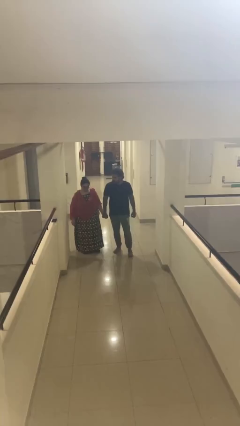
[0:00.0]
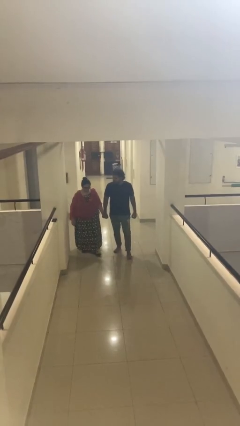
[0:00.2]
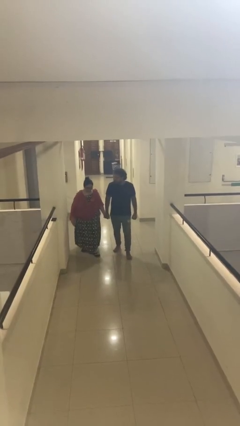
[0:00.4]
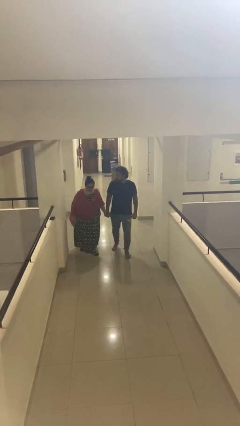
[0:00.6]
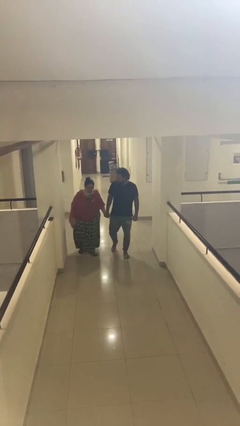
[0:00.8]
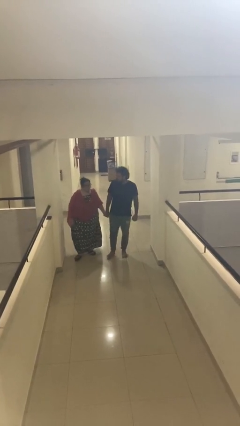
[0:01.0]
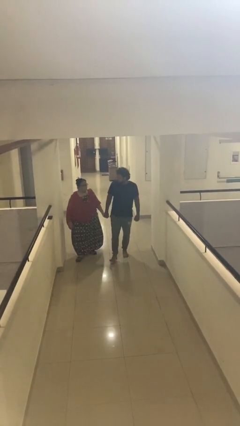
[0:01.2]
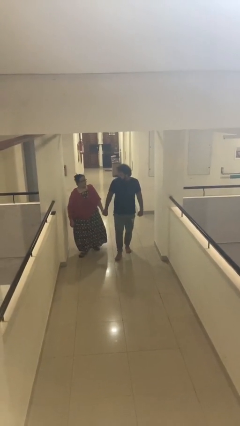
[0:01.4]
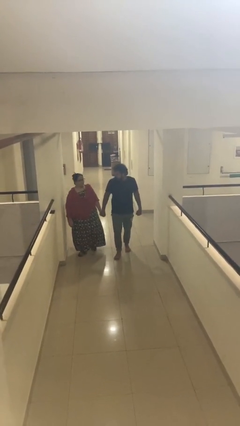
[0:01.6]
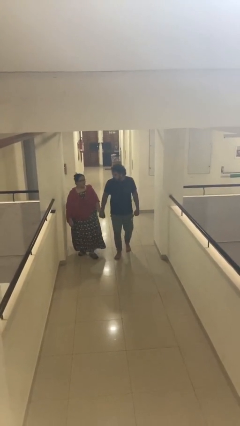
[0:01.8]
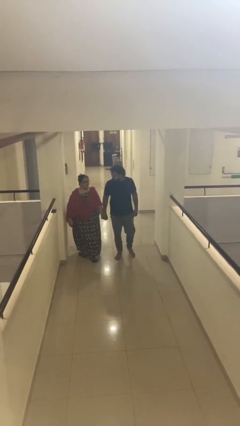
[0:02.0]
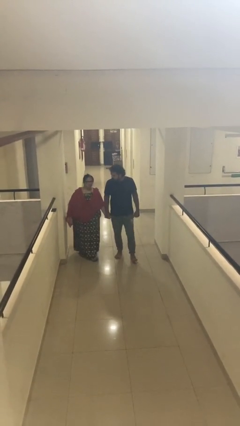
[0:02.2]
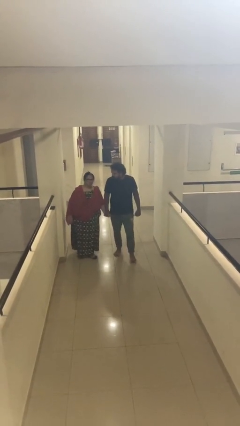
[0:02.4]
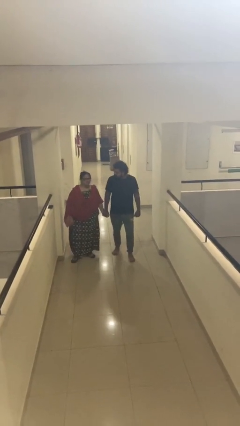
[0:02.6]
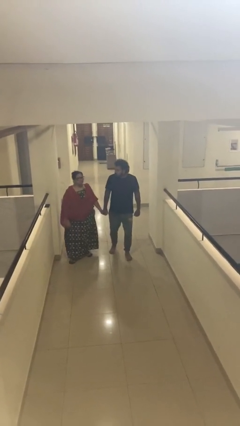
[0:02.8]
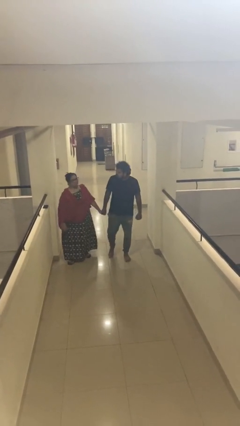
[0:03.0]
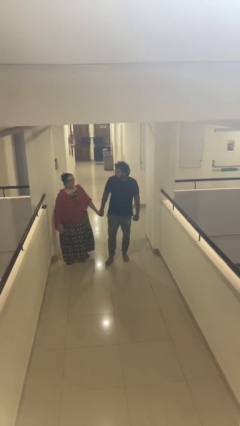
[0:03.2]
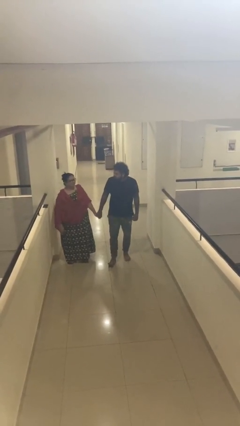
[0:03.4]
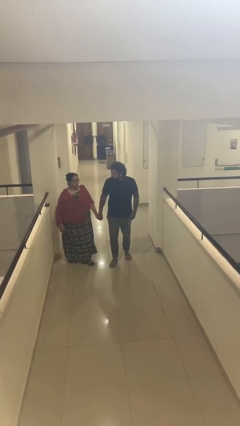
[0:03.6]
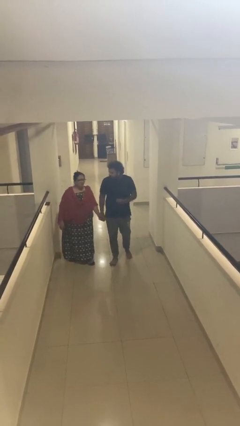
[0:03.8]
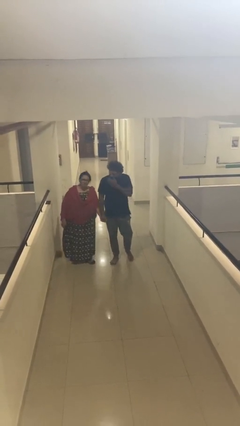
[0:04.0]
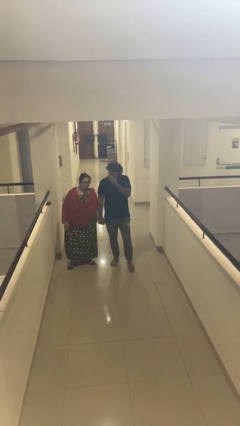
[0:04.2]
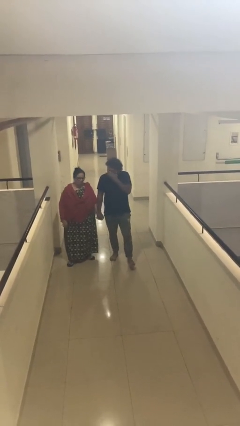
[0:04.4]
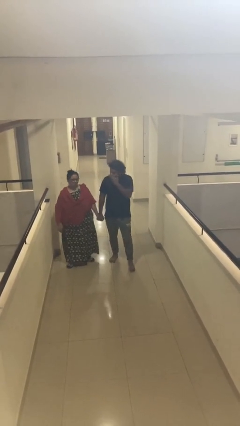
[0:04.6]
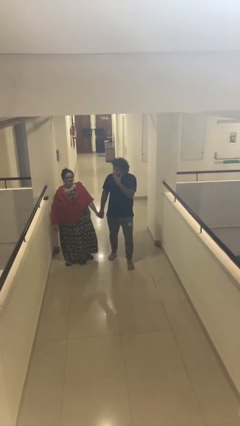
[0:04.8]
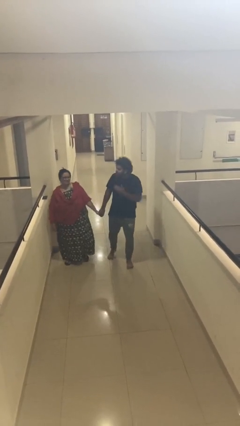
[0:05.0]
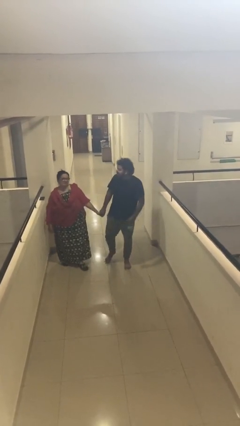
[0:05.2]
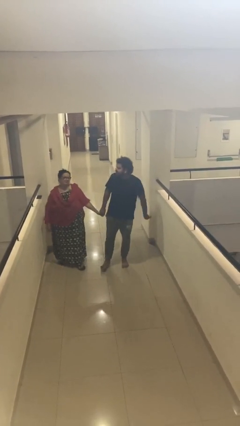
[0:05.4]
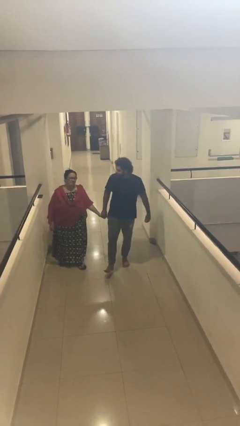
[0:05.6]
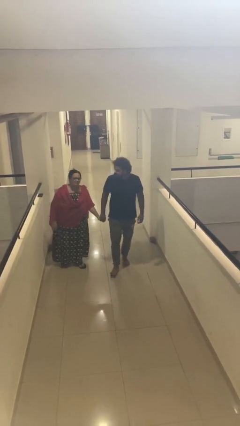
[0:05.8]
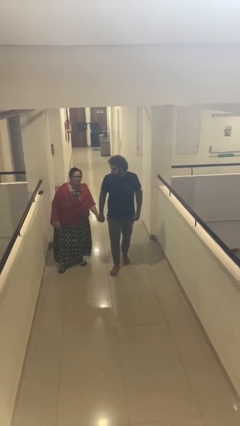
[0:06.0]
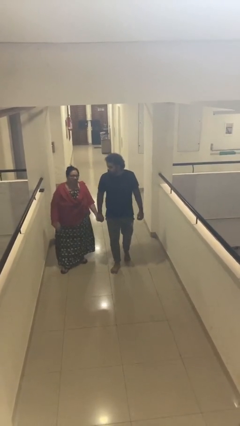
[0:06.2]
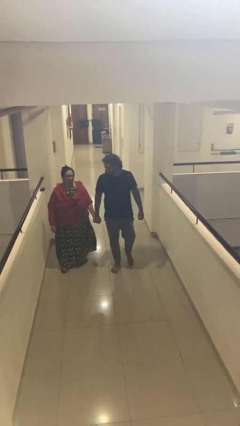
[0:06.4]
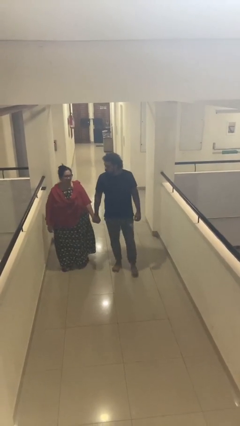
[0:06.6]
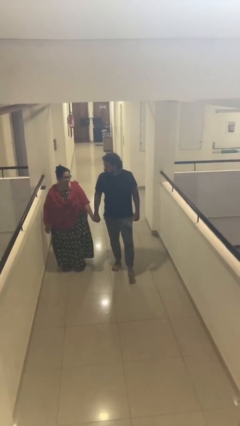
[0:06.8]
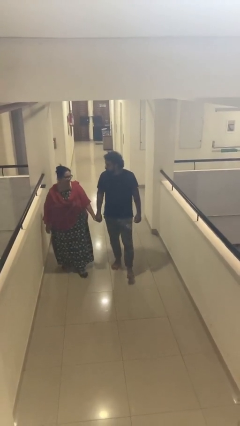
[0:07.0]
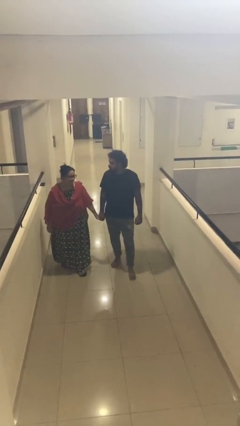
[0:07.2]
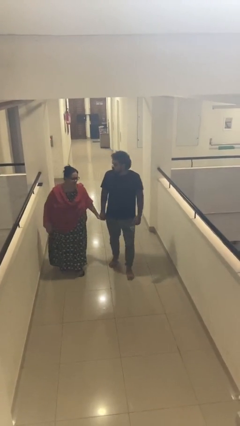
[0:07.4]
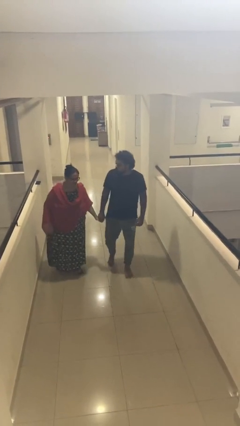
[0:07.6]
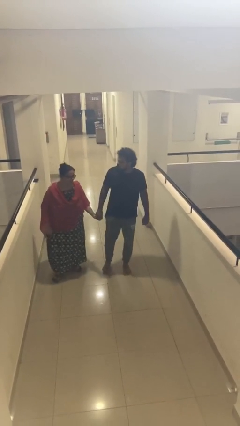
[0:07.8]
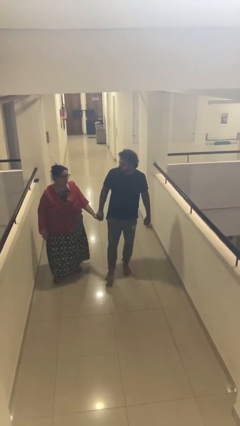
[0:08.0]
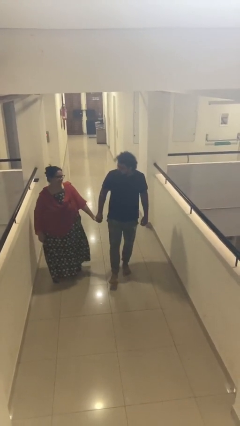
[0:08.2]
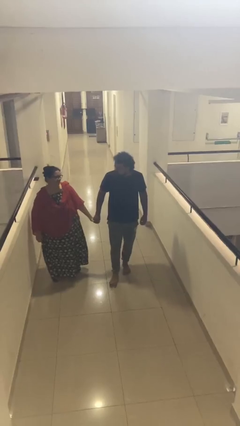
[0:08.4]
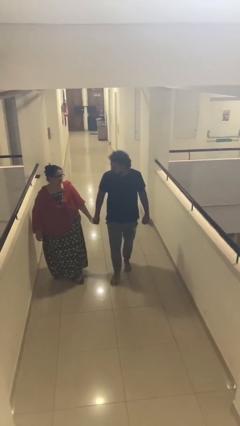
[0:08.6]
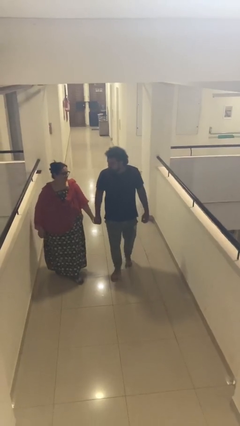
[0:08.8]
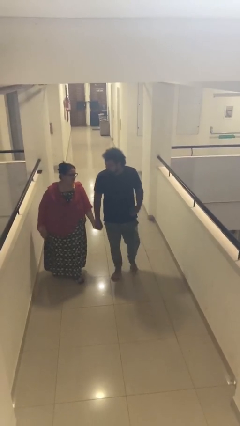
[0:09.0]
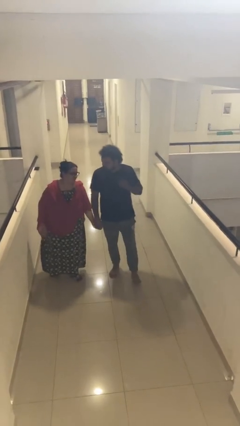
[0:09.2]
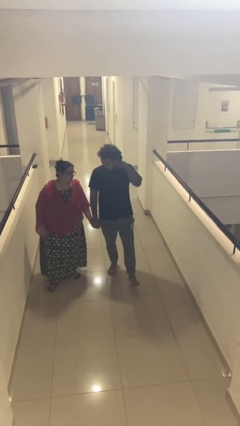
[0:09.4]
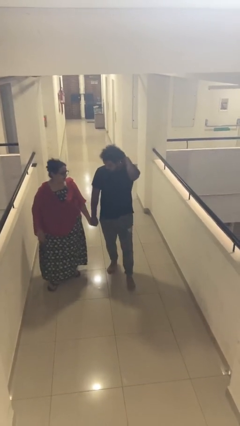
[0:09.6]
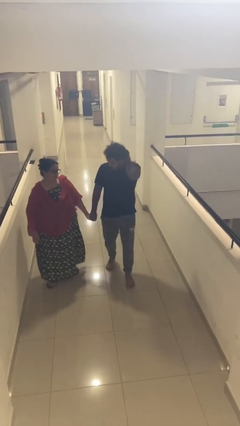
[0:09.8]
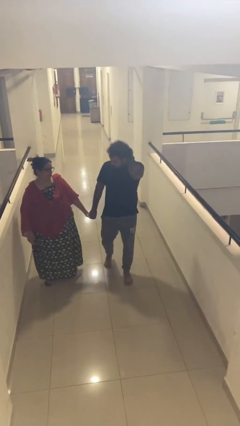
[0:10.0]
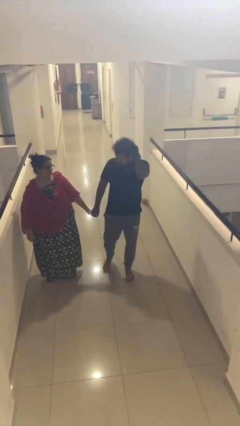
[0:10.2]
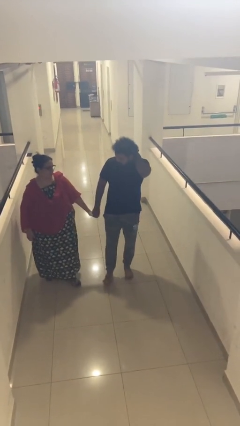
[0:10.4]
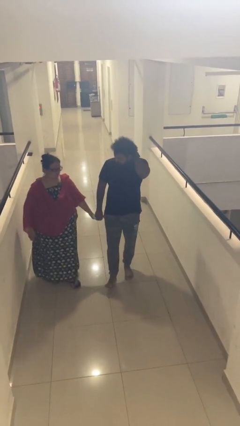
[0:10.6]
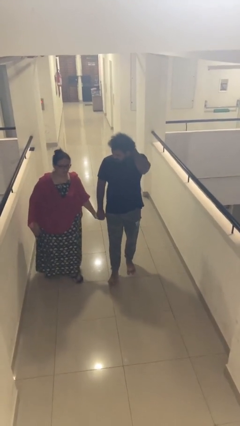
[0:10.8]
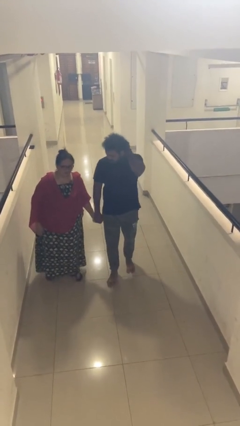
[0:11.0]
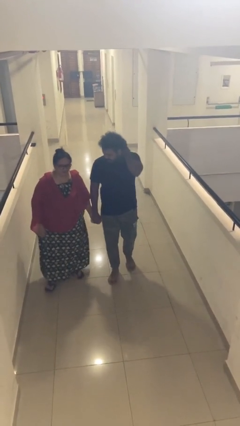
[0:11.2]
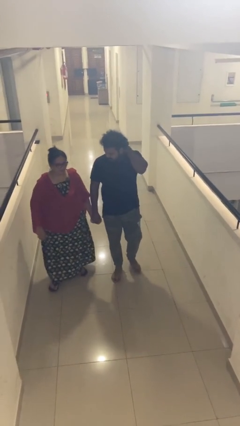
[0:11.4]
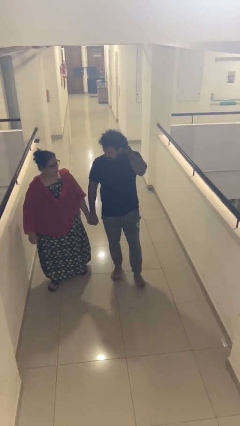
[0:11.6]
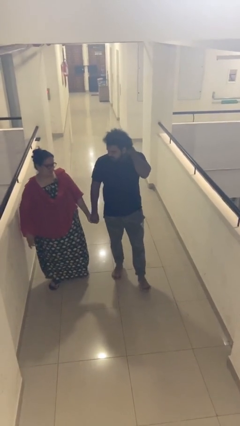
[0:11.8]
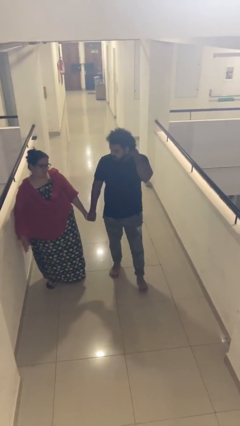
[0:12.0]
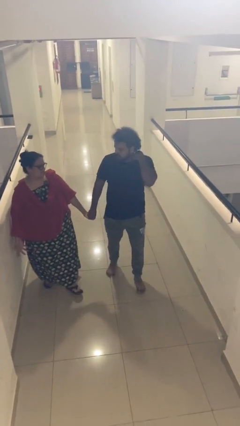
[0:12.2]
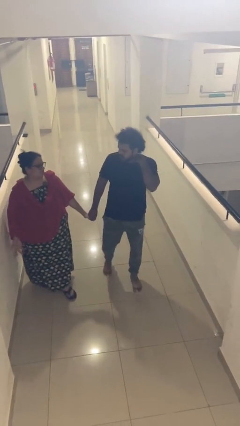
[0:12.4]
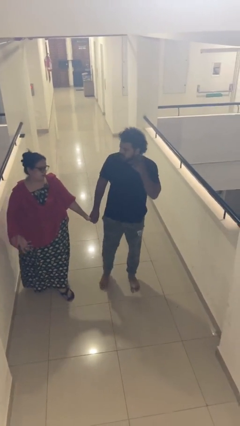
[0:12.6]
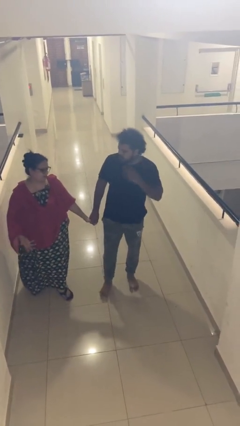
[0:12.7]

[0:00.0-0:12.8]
person holds hand

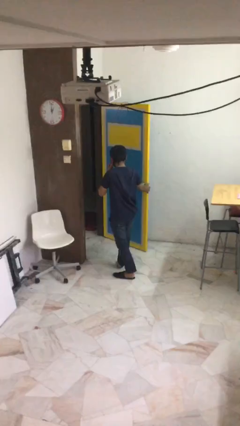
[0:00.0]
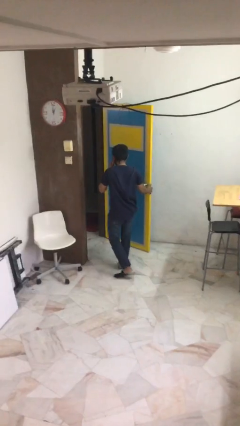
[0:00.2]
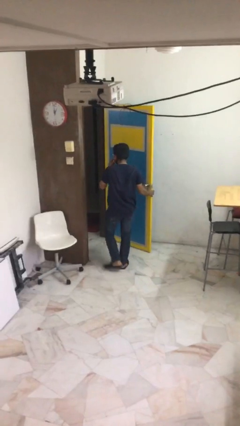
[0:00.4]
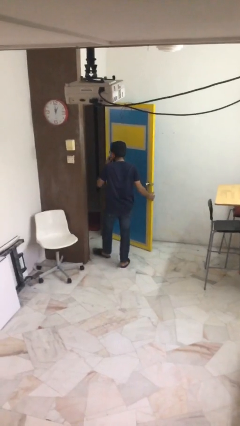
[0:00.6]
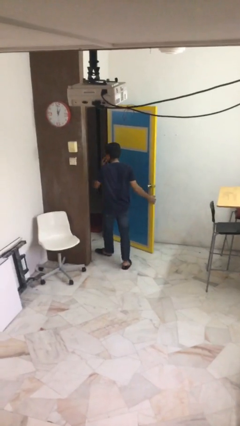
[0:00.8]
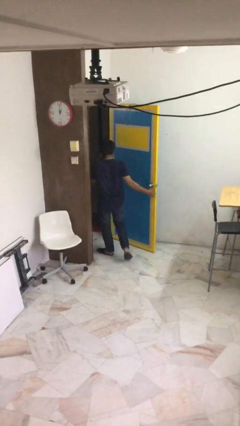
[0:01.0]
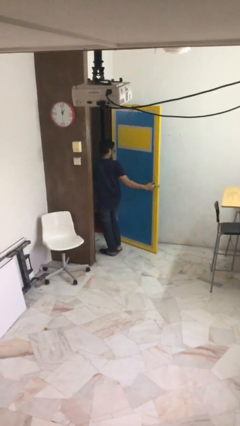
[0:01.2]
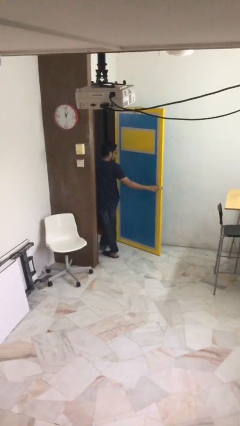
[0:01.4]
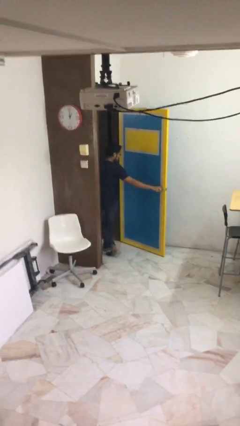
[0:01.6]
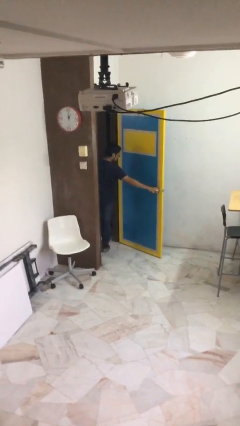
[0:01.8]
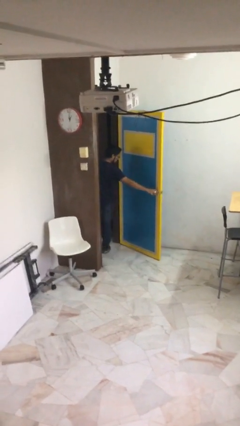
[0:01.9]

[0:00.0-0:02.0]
person exits scene through structure

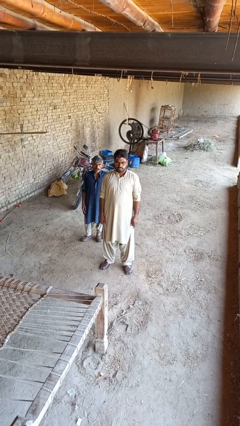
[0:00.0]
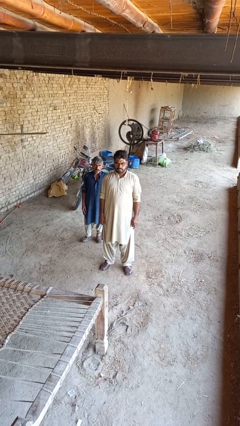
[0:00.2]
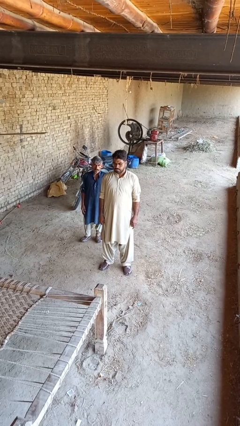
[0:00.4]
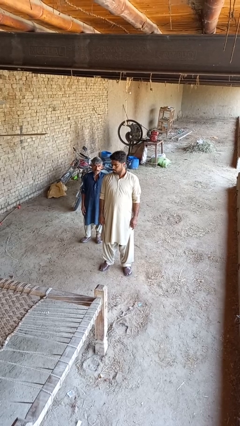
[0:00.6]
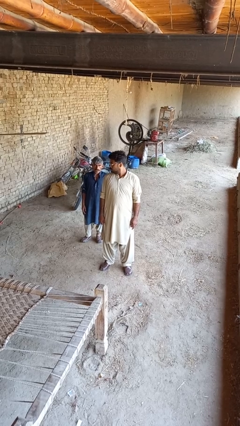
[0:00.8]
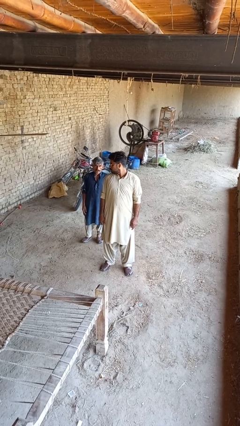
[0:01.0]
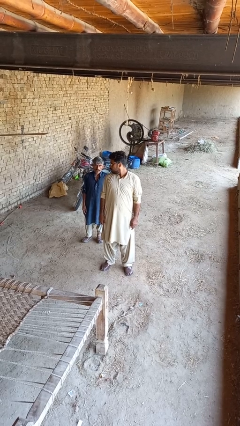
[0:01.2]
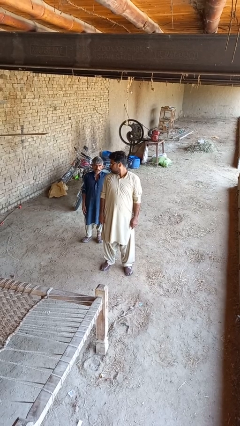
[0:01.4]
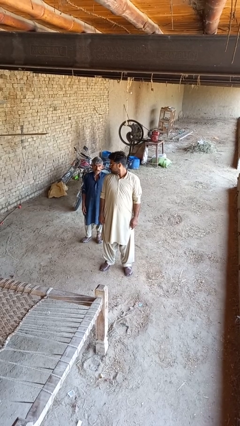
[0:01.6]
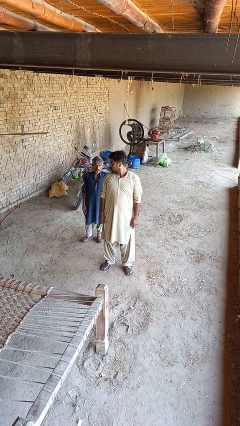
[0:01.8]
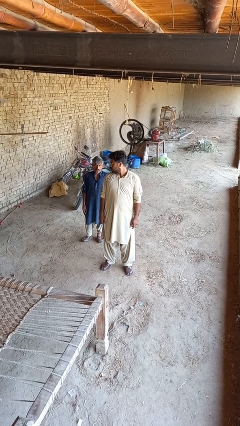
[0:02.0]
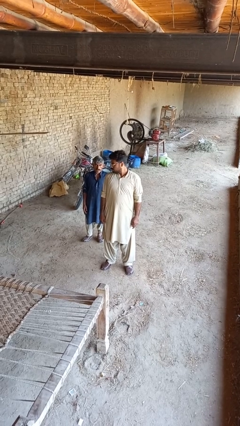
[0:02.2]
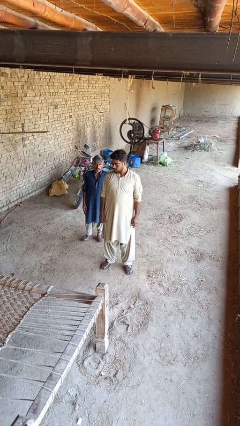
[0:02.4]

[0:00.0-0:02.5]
person looks over shoulder

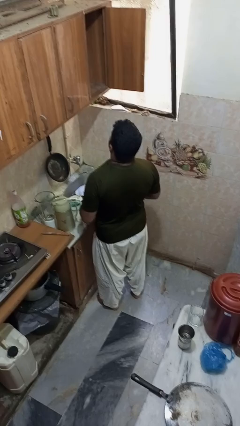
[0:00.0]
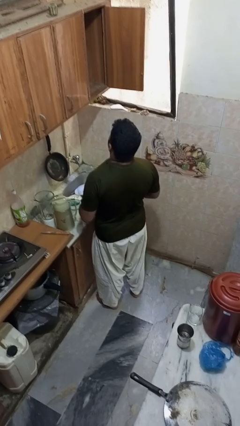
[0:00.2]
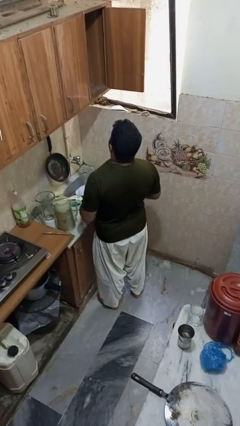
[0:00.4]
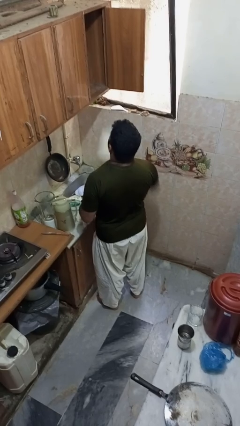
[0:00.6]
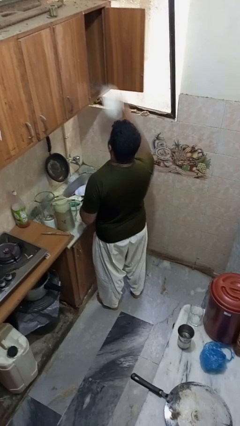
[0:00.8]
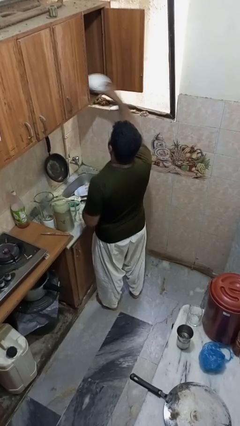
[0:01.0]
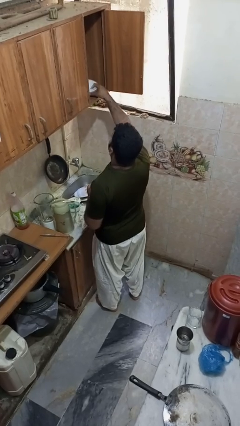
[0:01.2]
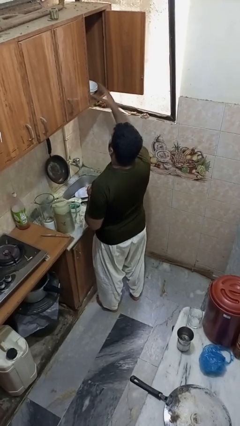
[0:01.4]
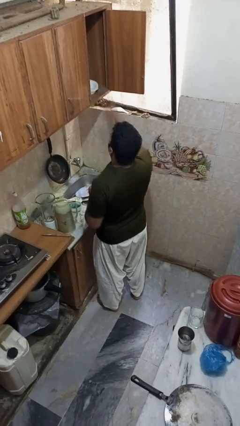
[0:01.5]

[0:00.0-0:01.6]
person puts object in cabinet
